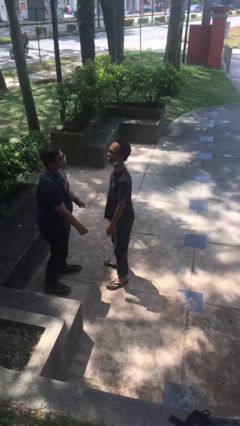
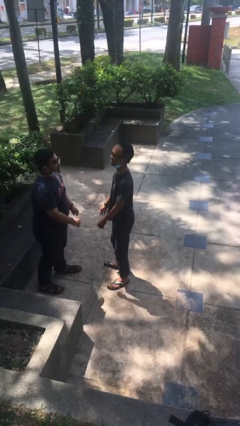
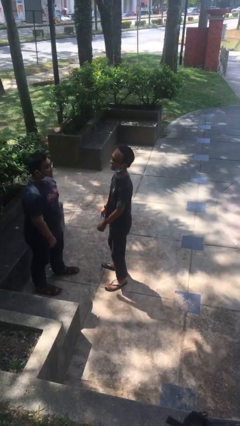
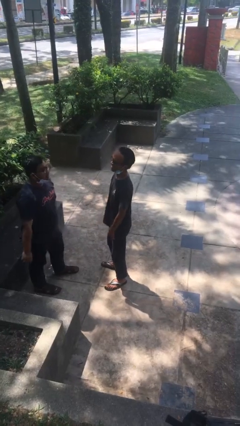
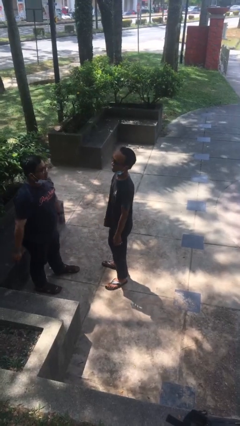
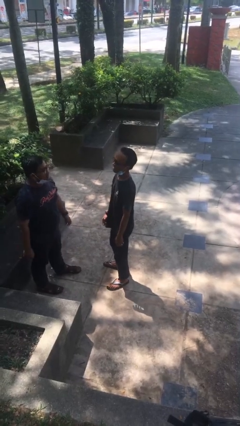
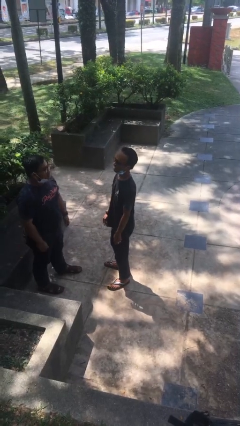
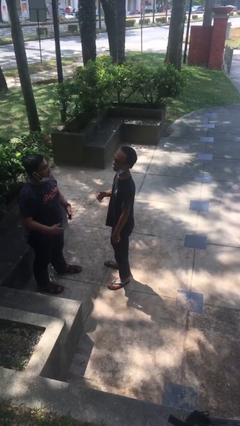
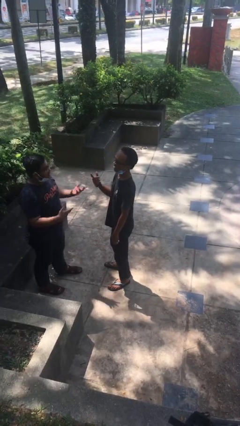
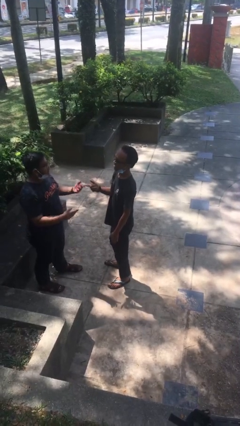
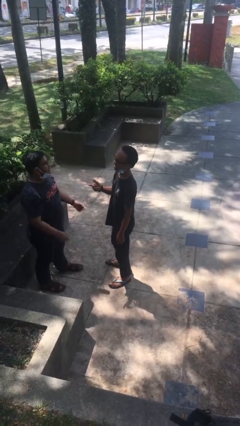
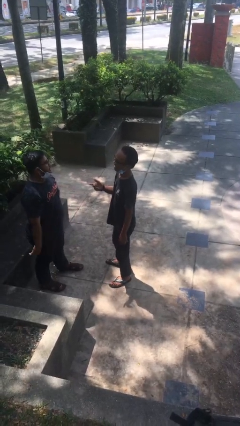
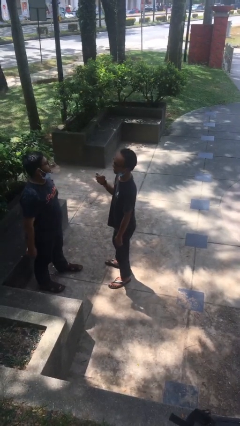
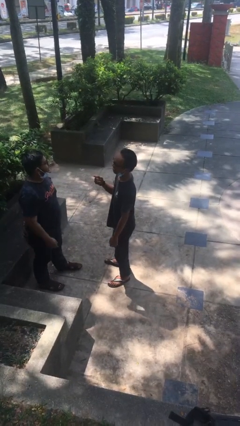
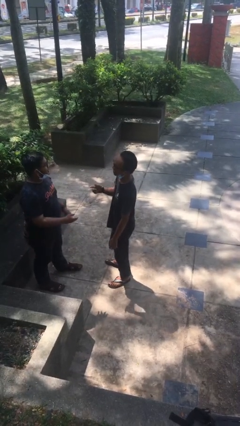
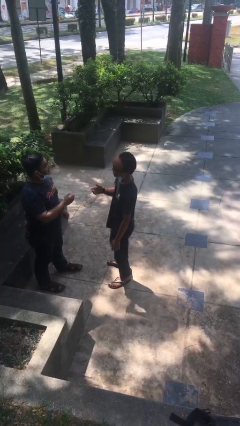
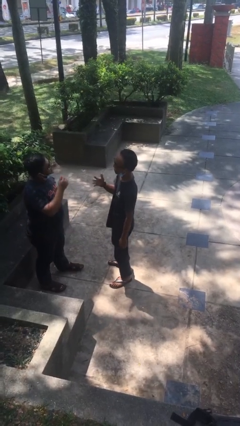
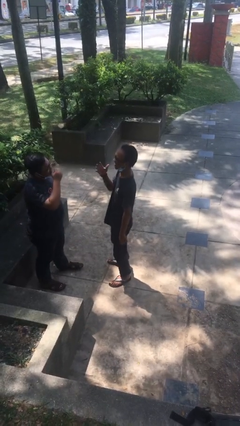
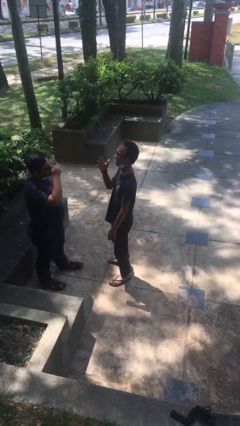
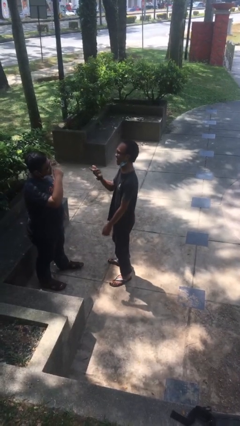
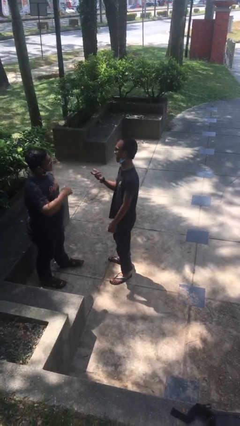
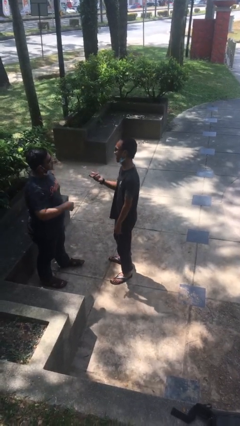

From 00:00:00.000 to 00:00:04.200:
person talks to person

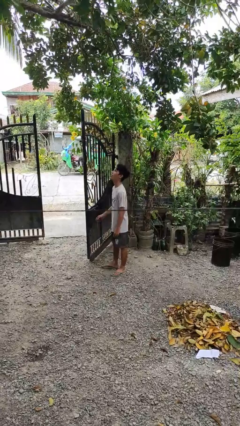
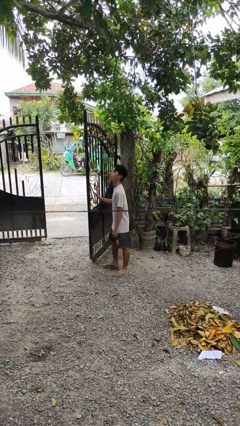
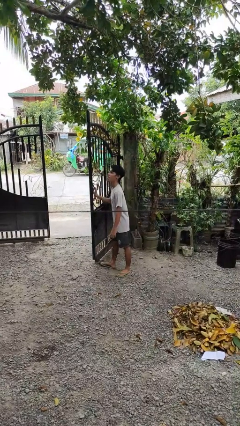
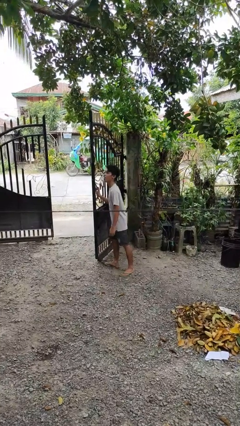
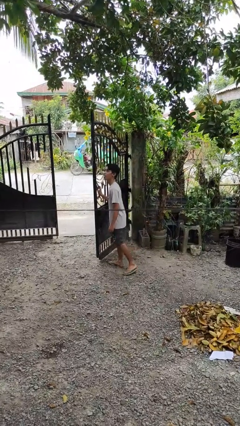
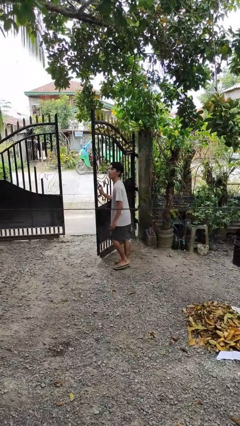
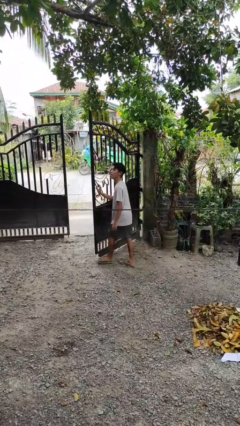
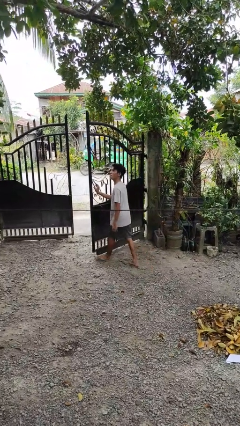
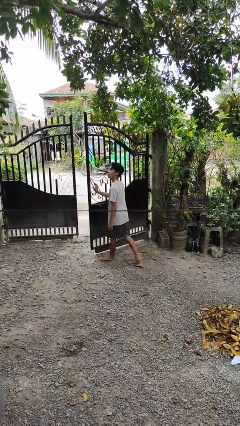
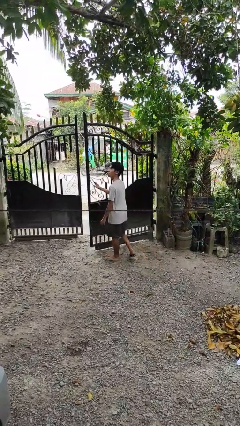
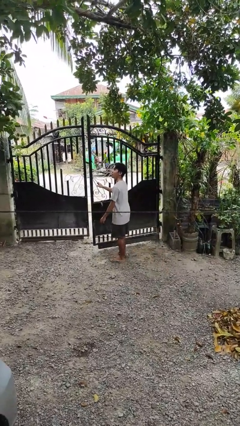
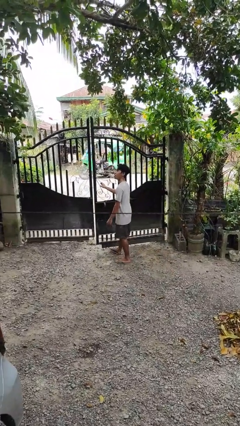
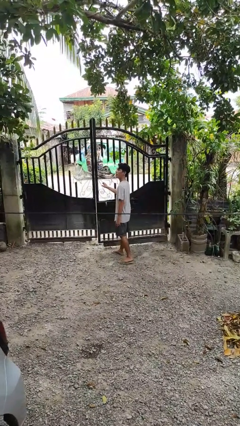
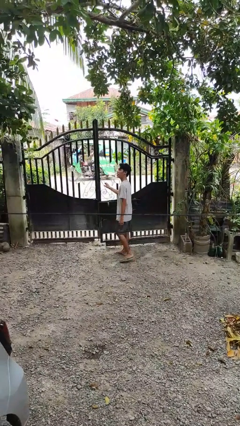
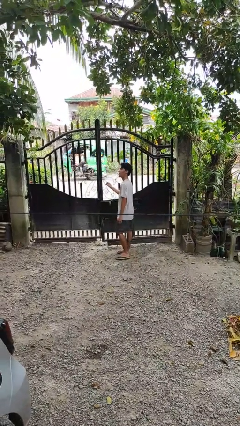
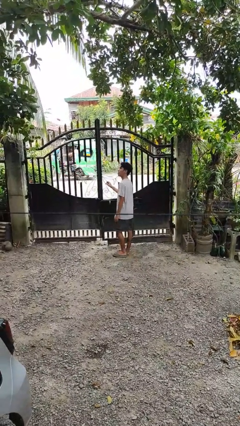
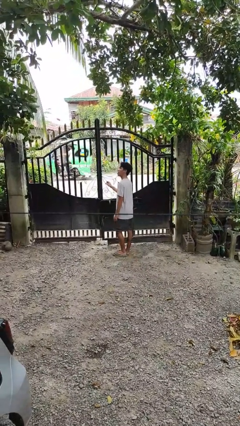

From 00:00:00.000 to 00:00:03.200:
person closes gate

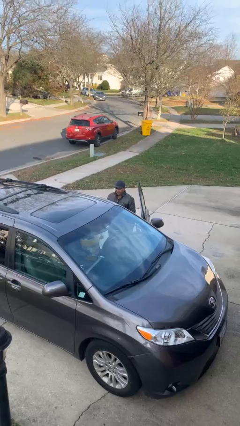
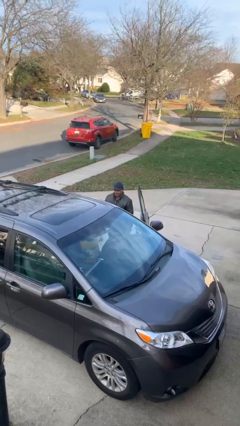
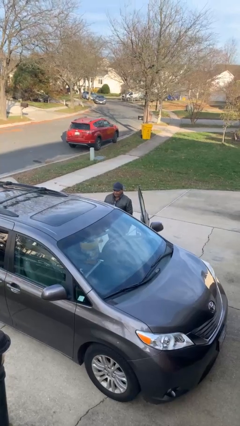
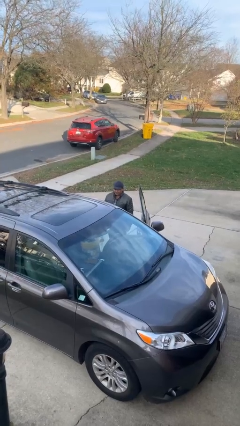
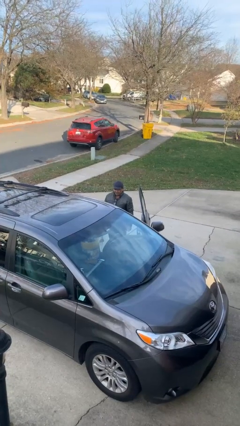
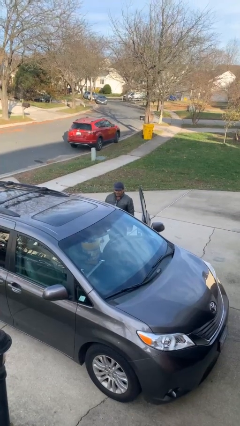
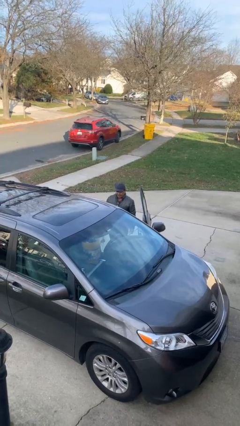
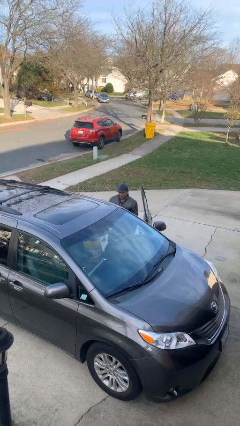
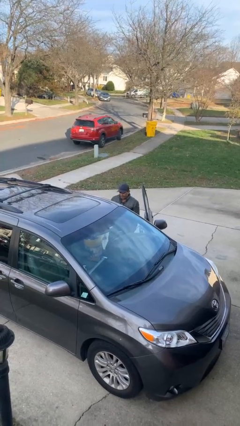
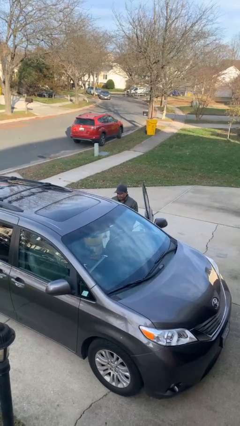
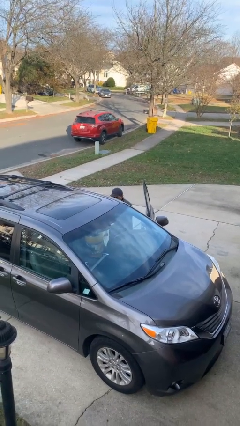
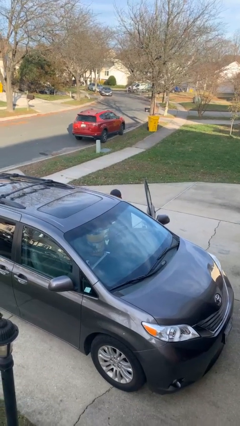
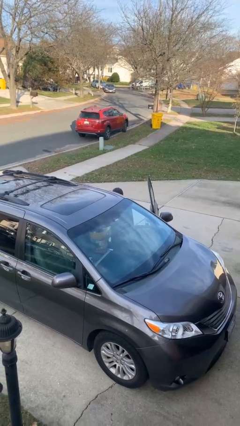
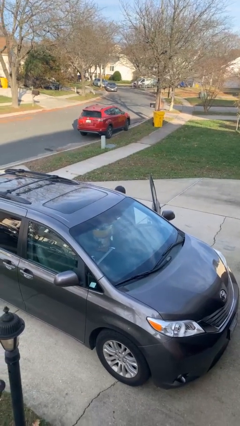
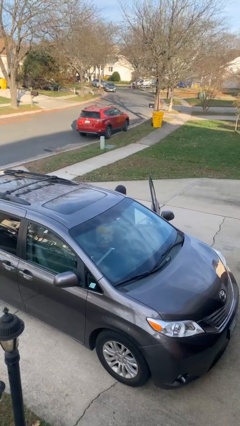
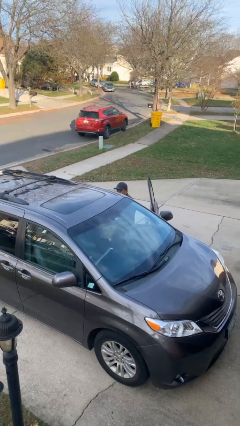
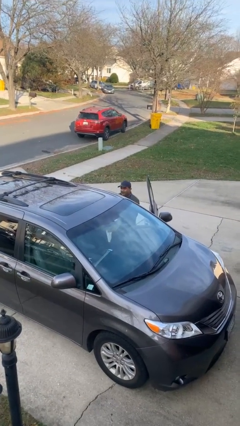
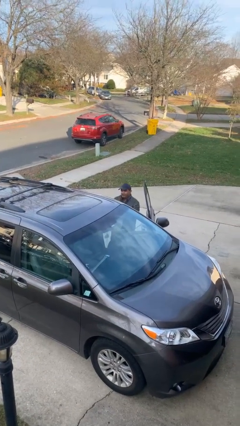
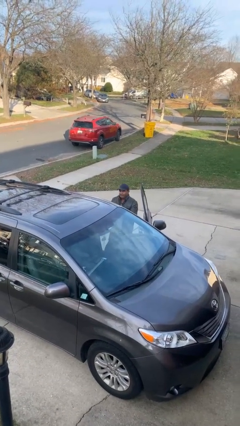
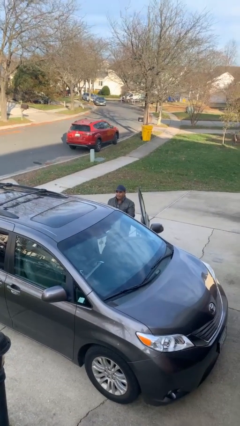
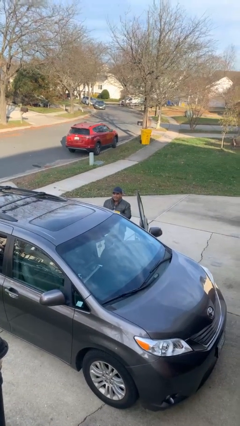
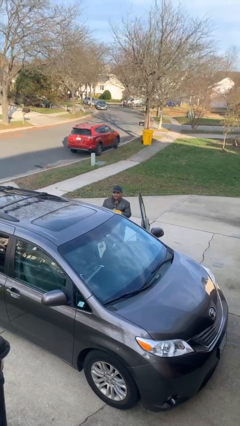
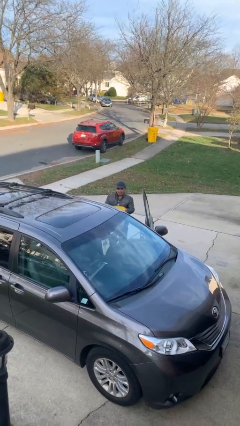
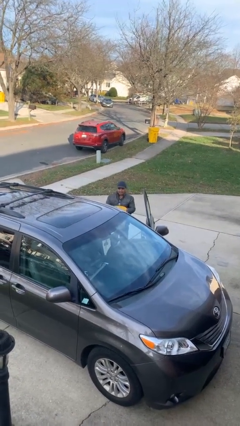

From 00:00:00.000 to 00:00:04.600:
person unloads car

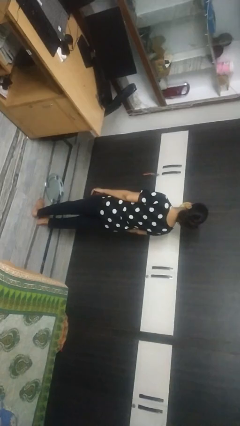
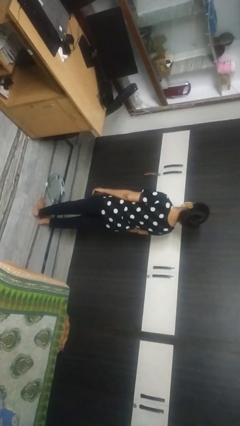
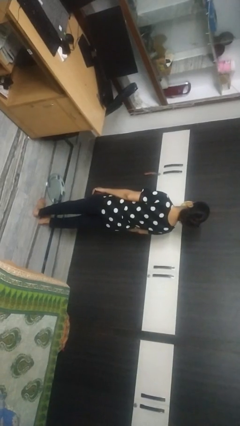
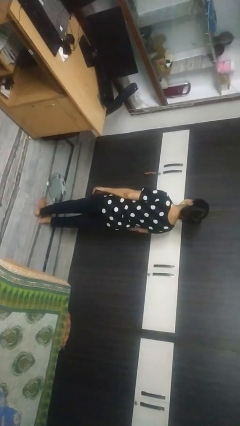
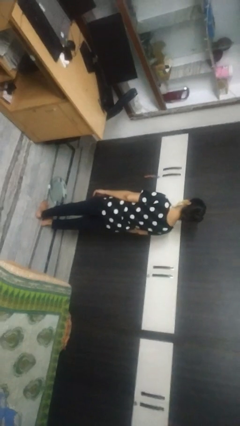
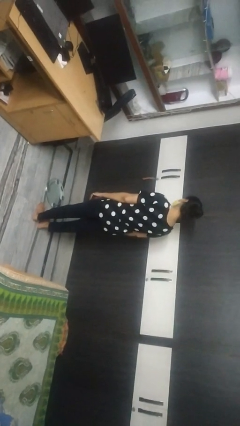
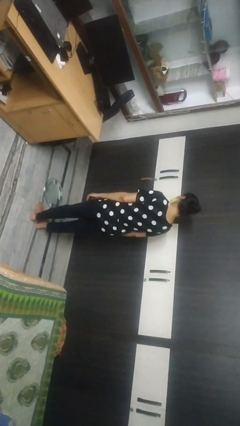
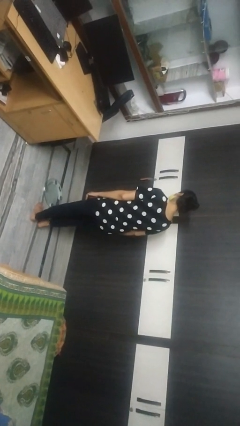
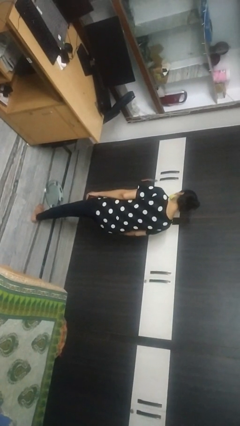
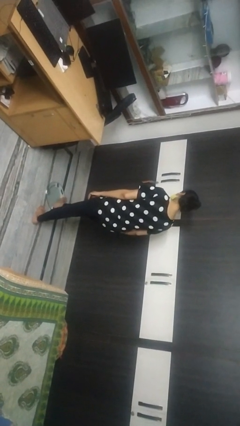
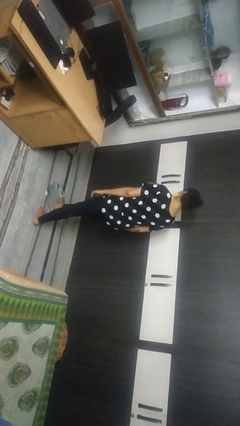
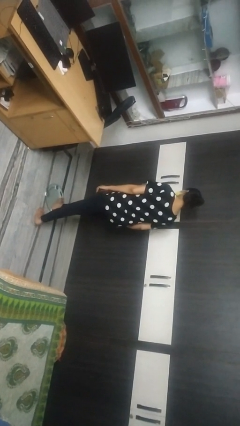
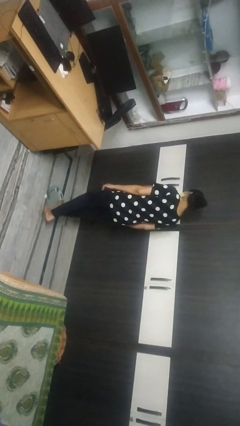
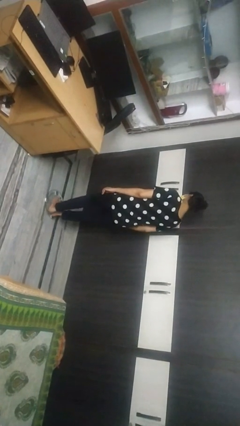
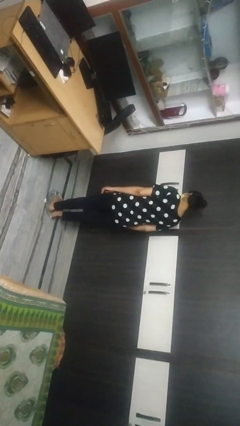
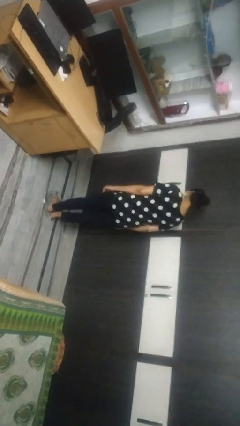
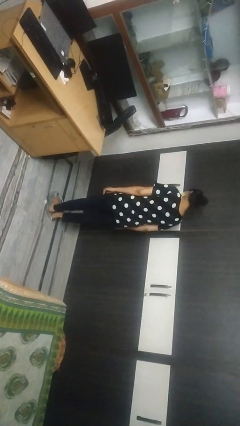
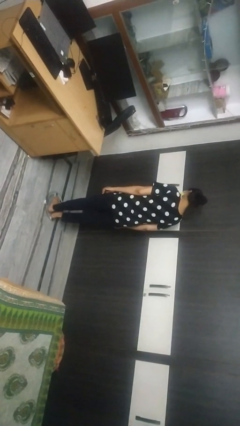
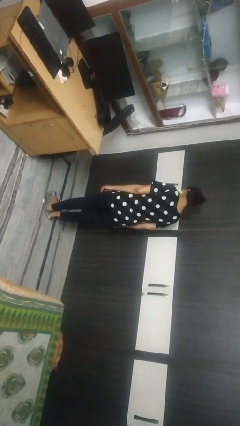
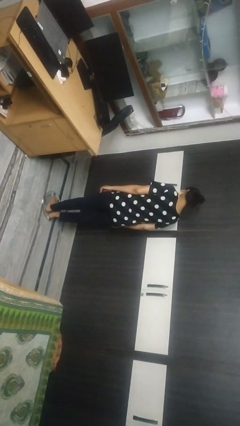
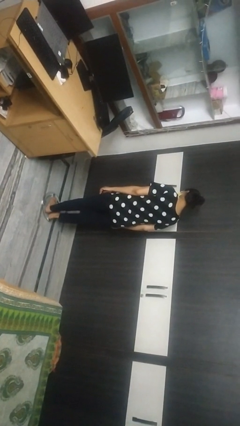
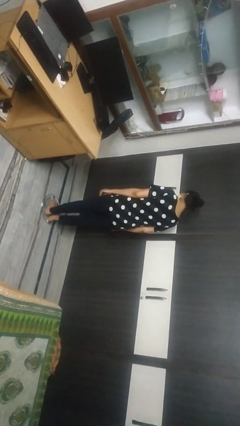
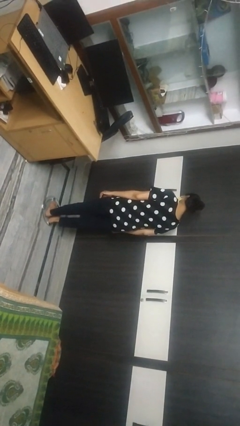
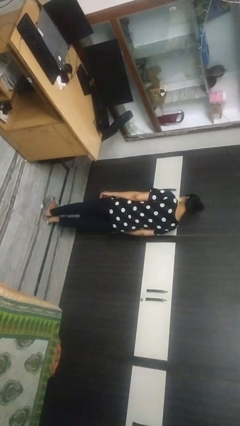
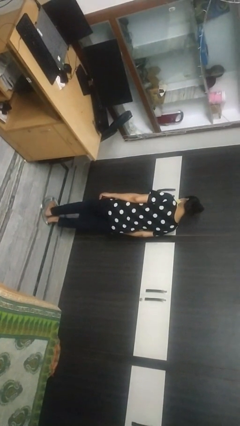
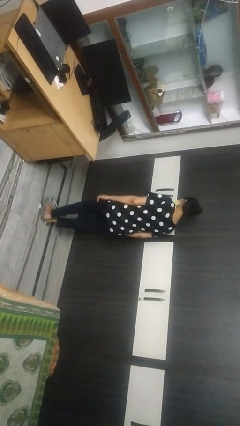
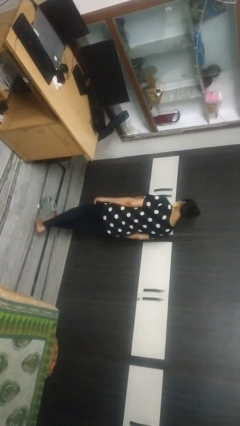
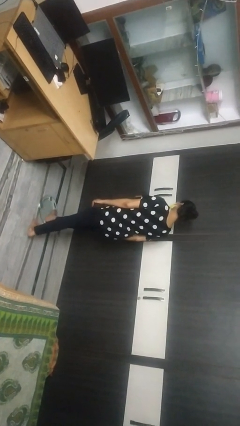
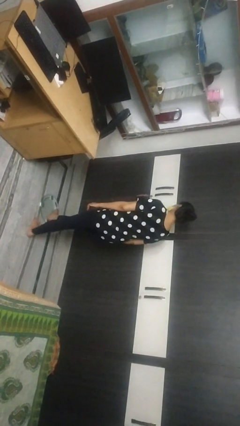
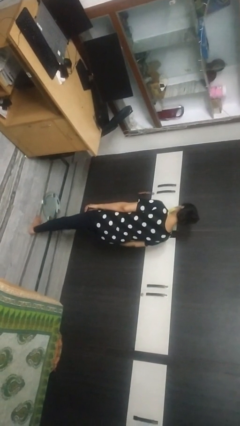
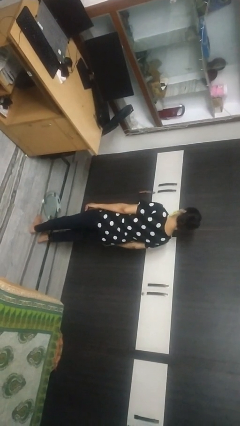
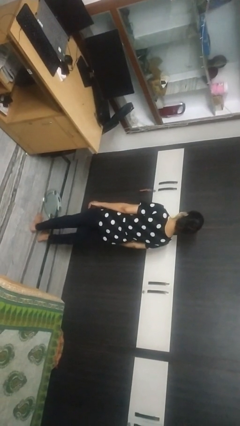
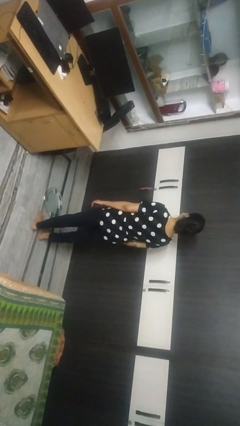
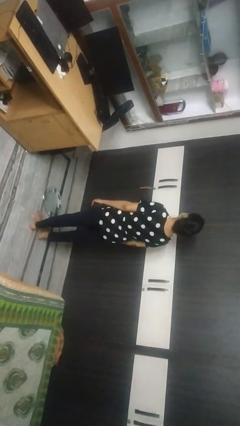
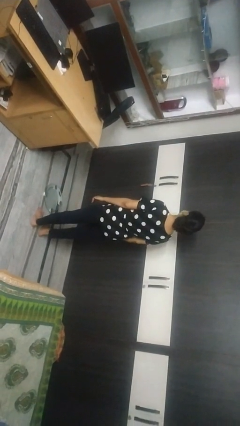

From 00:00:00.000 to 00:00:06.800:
person uses bodyweight scale
